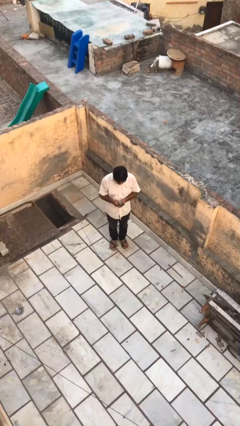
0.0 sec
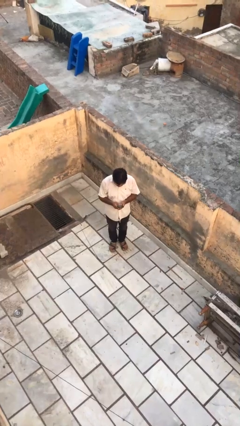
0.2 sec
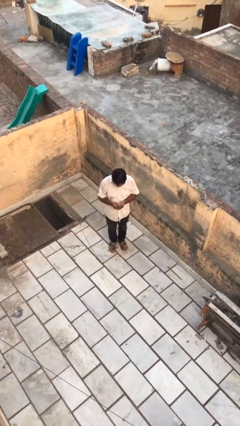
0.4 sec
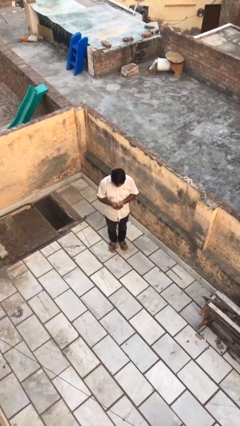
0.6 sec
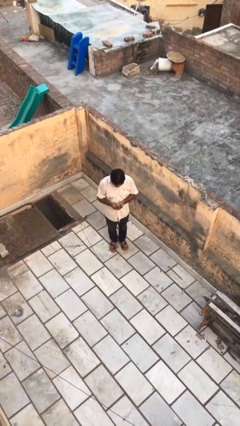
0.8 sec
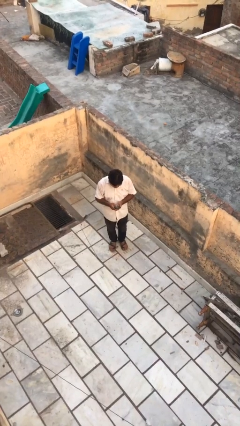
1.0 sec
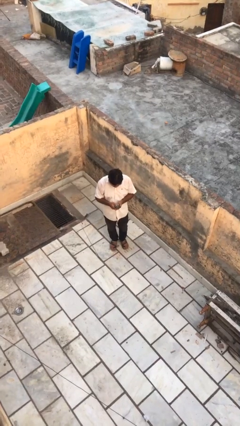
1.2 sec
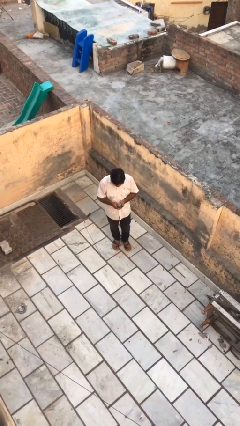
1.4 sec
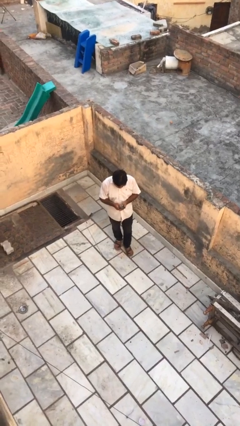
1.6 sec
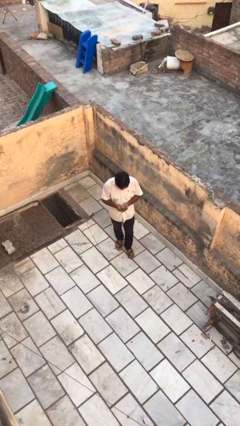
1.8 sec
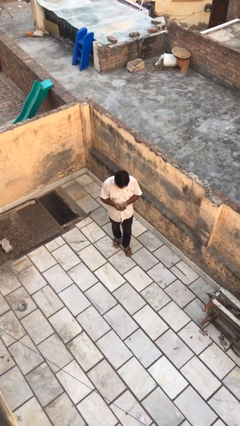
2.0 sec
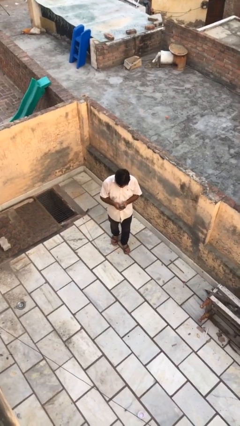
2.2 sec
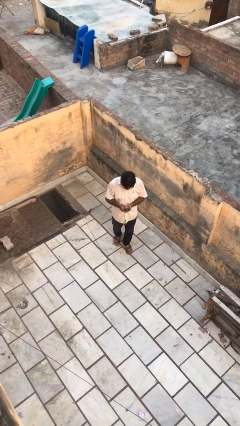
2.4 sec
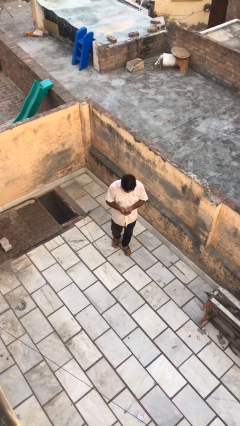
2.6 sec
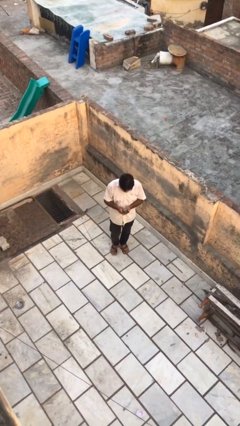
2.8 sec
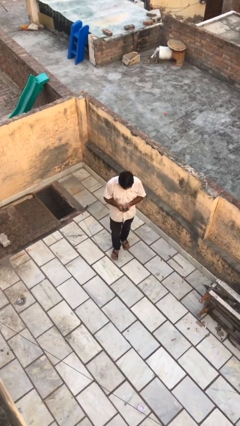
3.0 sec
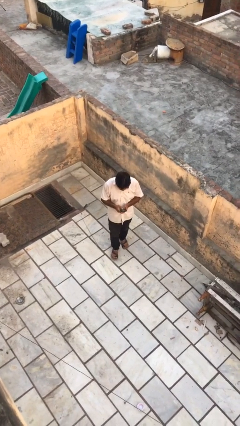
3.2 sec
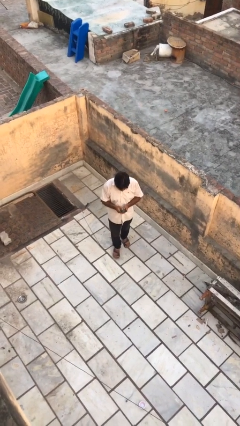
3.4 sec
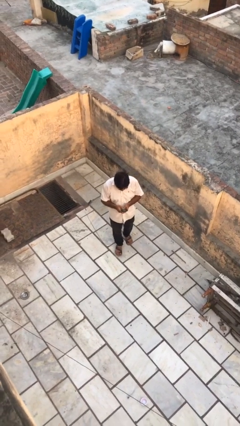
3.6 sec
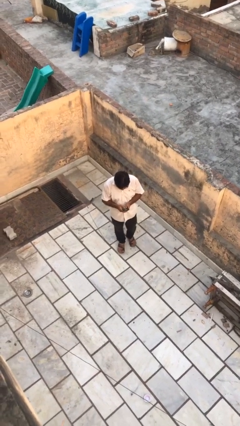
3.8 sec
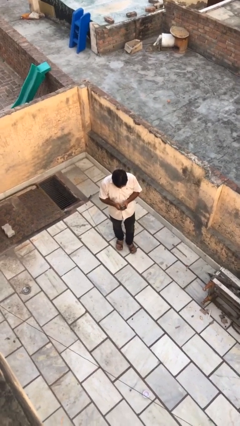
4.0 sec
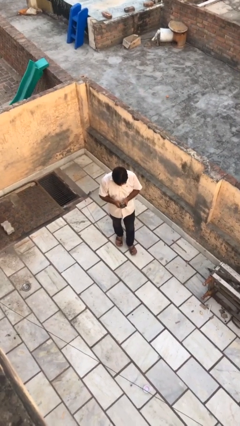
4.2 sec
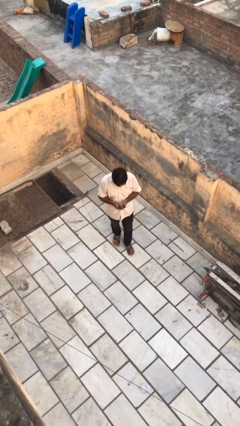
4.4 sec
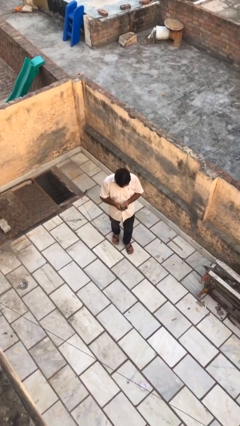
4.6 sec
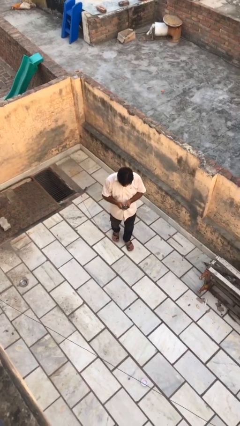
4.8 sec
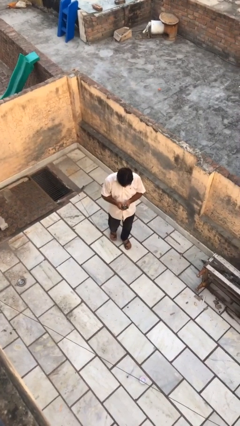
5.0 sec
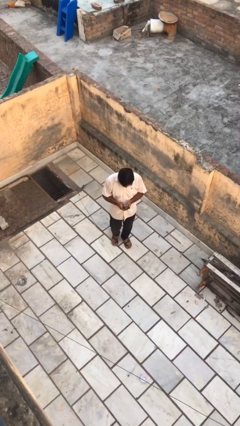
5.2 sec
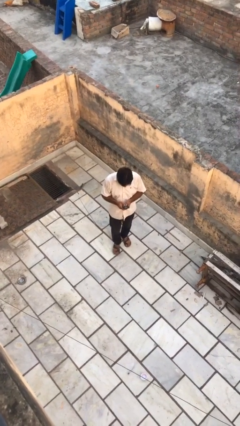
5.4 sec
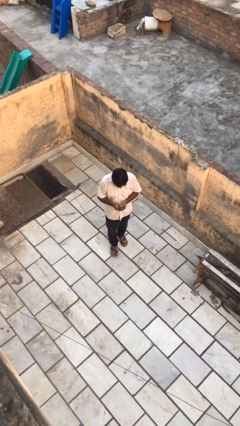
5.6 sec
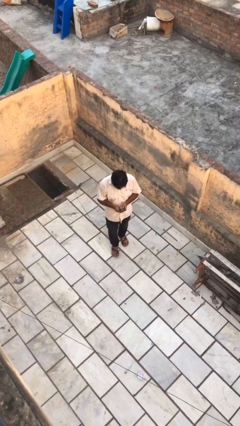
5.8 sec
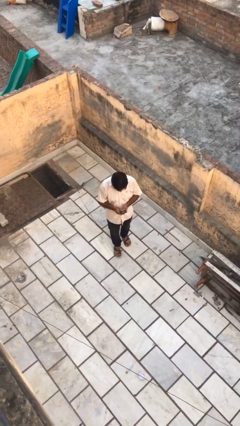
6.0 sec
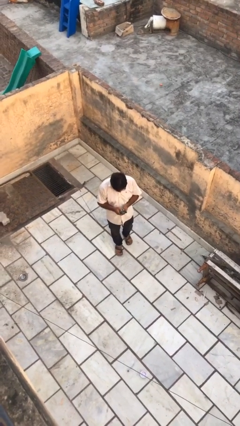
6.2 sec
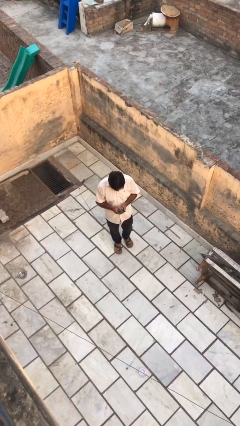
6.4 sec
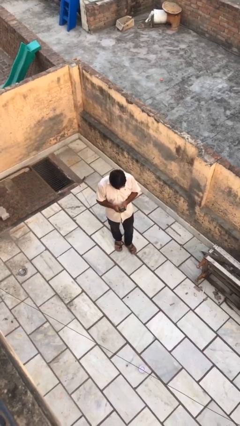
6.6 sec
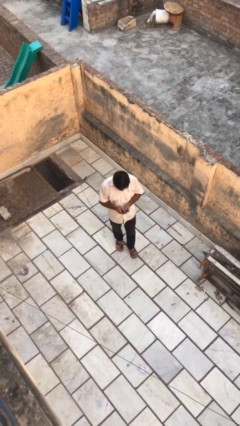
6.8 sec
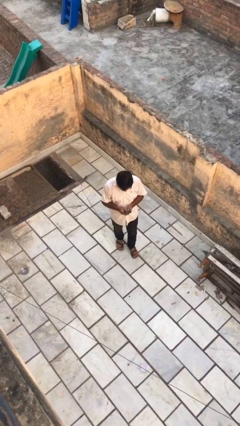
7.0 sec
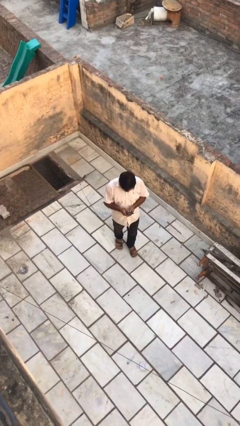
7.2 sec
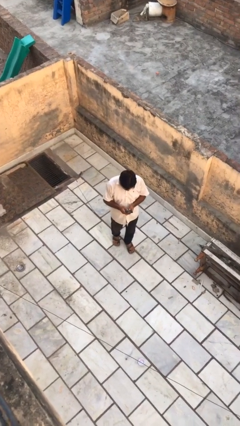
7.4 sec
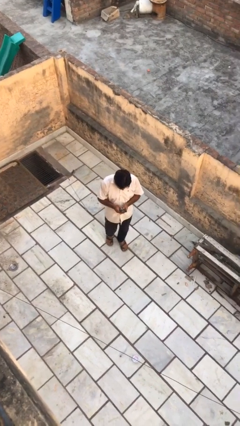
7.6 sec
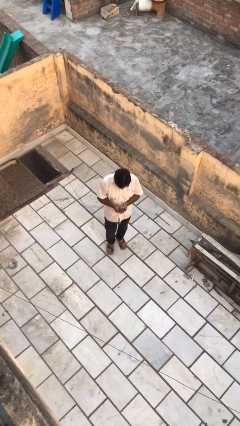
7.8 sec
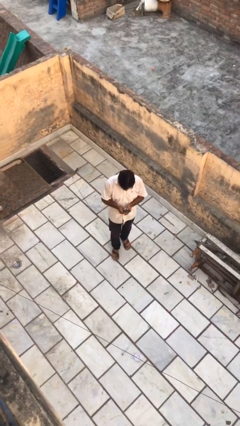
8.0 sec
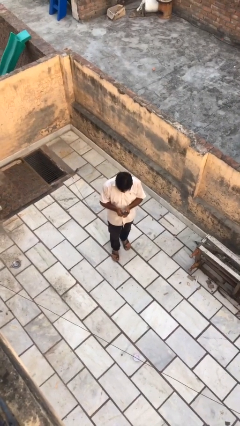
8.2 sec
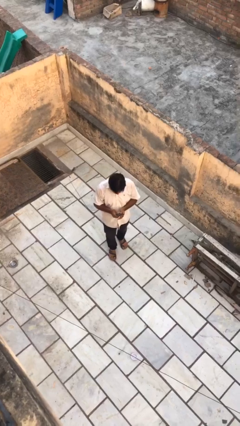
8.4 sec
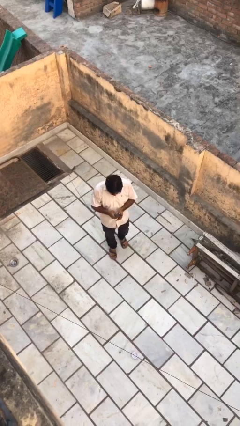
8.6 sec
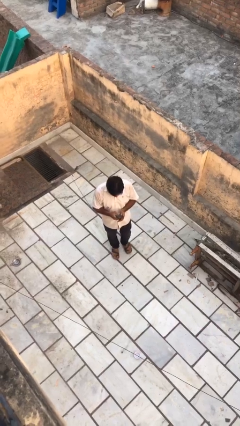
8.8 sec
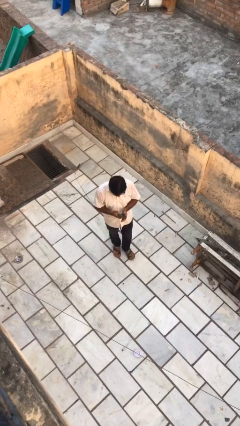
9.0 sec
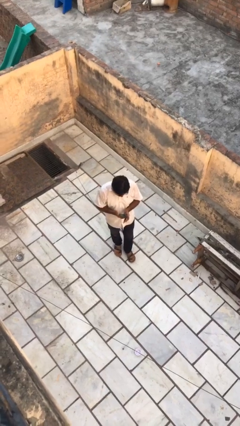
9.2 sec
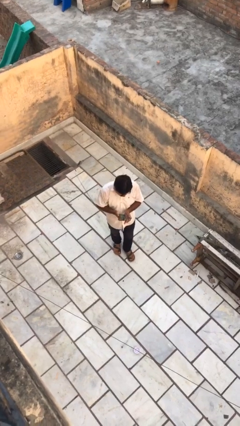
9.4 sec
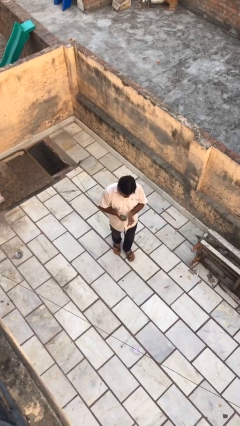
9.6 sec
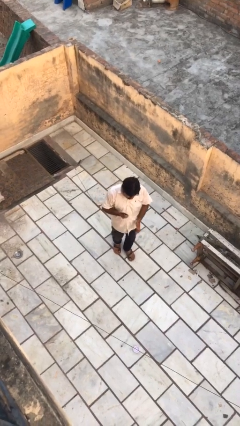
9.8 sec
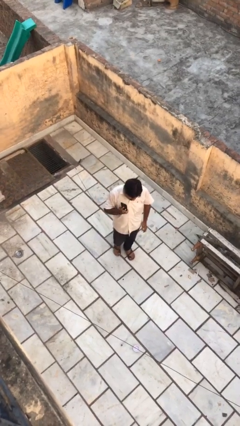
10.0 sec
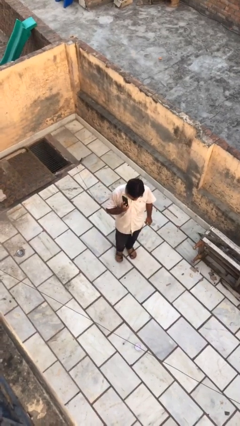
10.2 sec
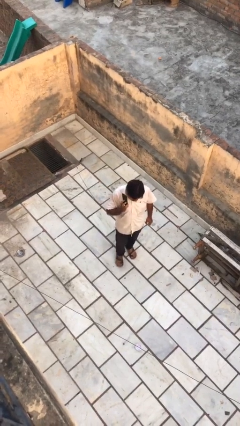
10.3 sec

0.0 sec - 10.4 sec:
person texts on phone

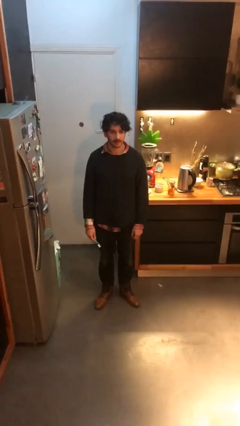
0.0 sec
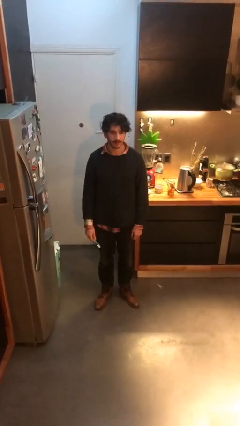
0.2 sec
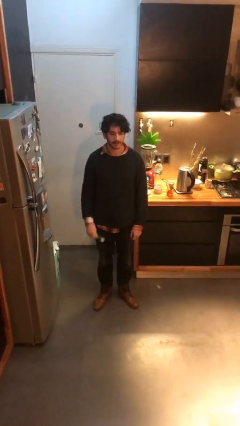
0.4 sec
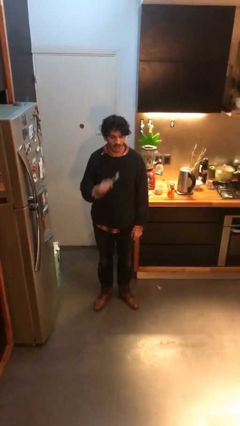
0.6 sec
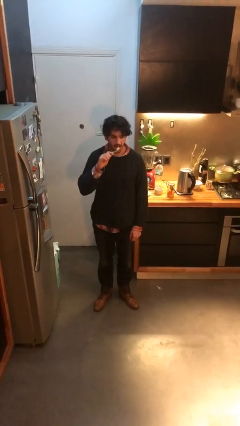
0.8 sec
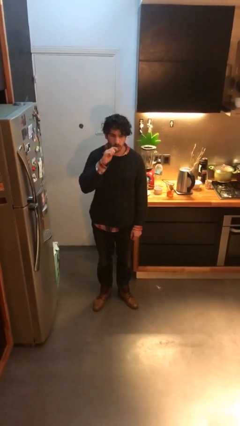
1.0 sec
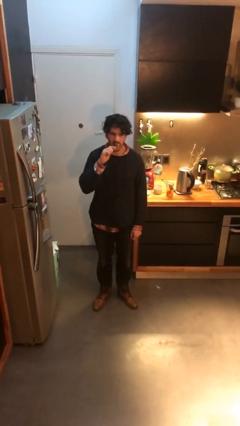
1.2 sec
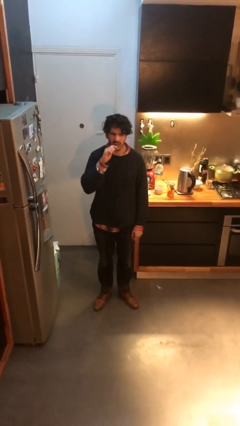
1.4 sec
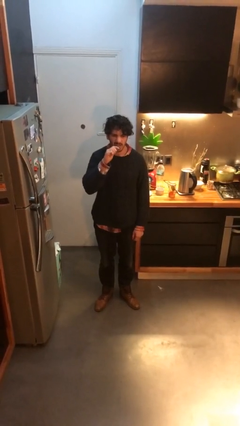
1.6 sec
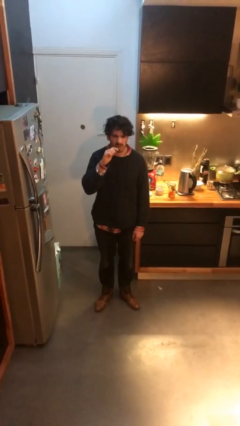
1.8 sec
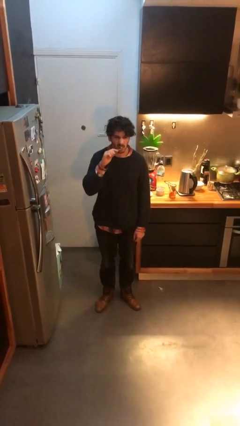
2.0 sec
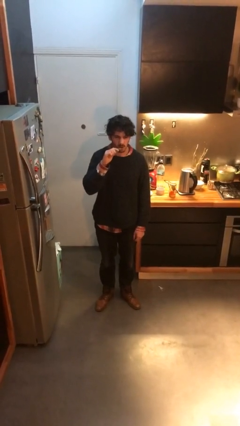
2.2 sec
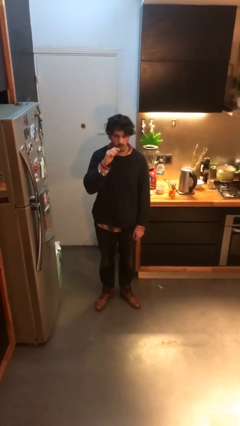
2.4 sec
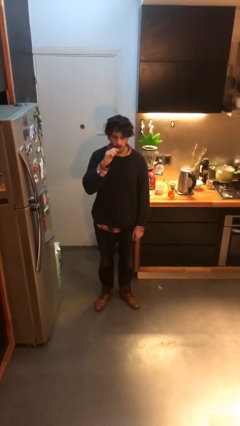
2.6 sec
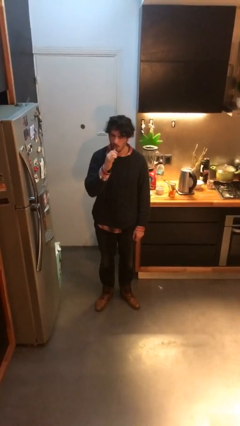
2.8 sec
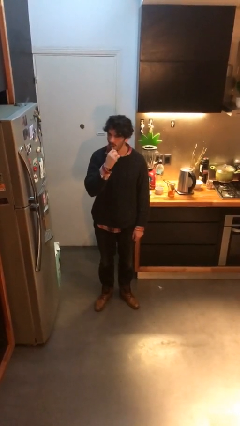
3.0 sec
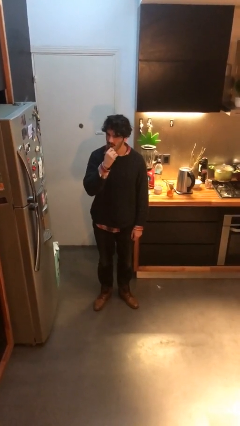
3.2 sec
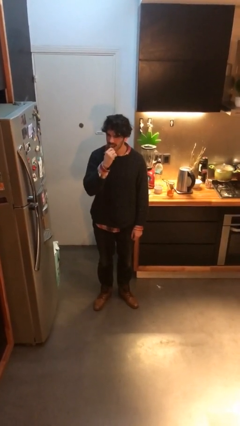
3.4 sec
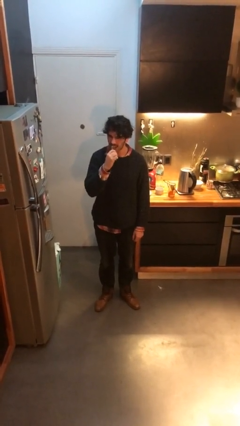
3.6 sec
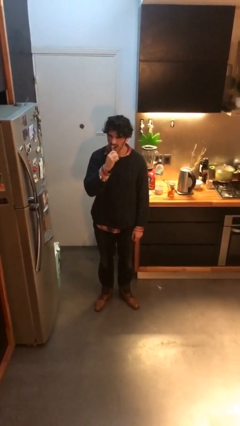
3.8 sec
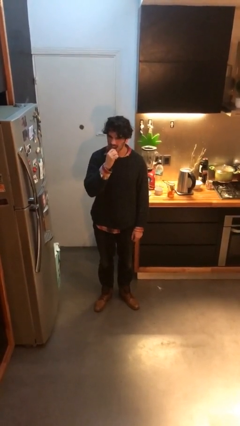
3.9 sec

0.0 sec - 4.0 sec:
person brushes teeth

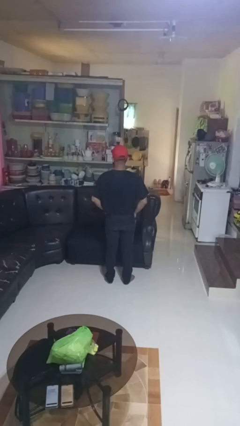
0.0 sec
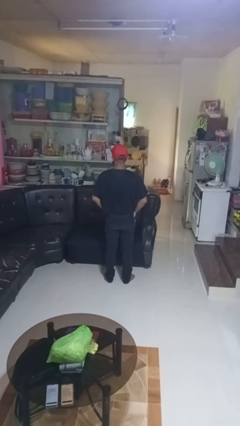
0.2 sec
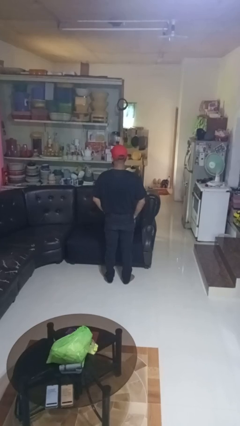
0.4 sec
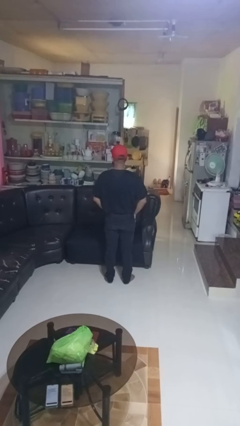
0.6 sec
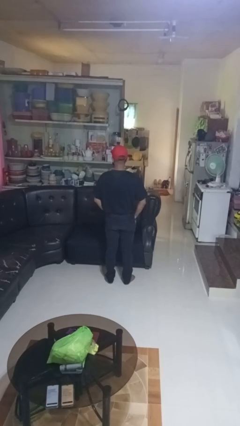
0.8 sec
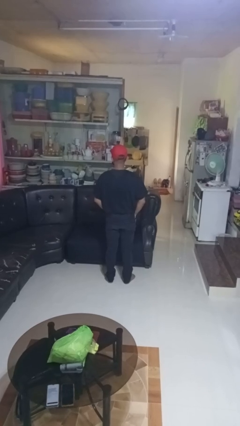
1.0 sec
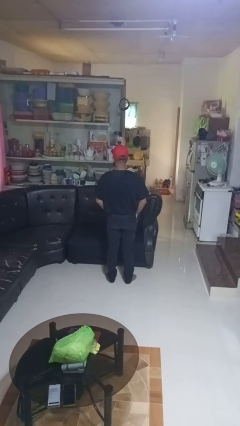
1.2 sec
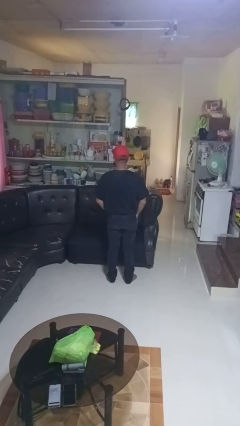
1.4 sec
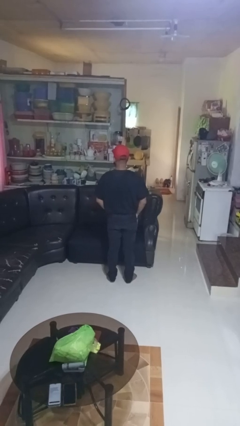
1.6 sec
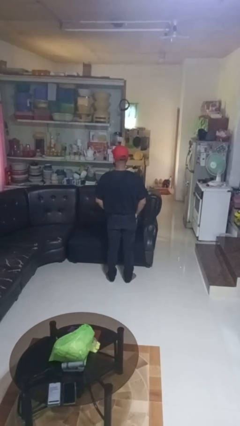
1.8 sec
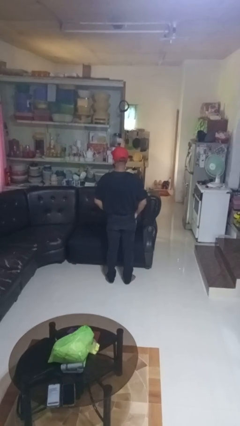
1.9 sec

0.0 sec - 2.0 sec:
person puts hands in back pockets

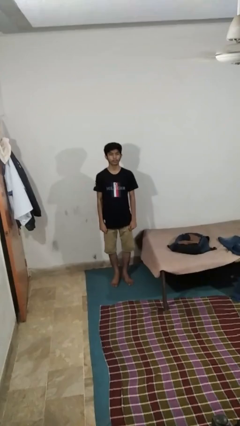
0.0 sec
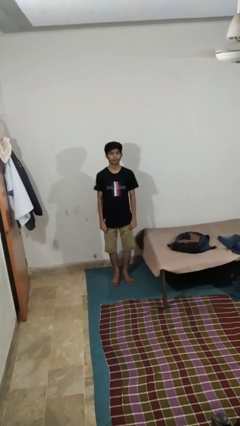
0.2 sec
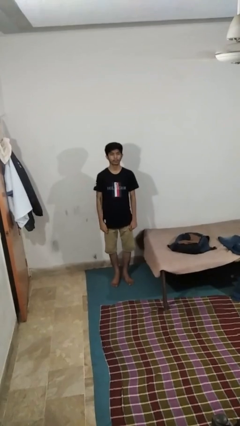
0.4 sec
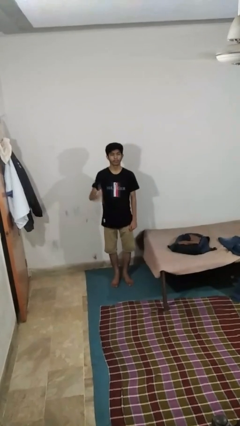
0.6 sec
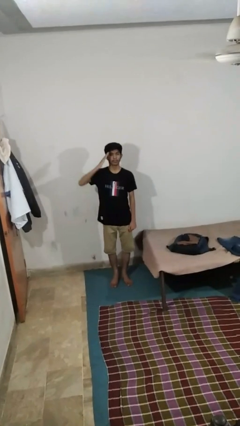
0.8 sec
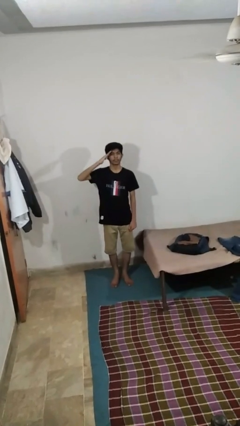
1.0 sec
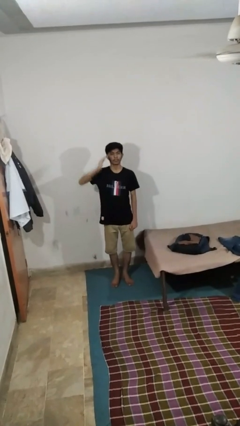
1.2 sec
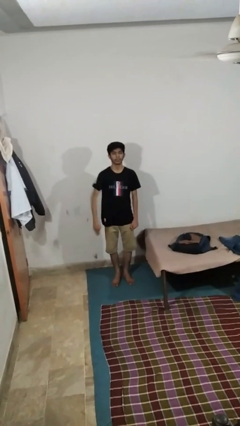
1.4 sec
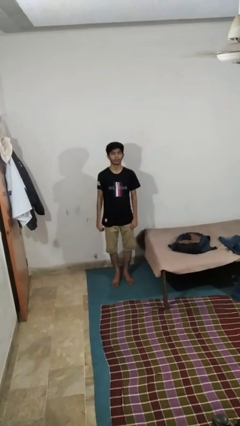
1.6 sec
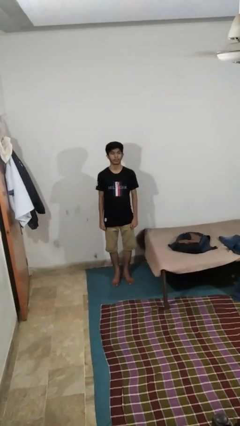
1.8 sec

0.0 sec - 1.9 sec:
person salutes
